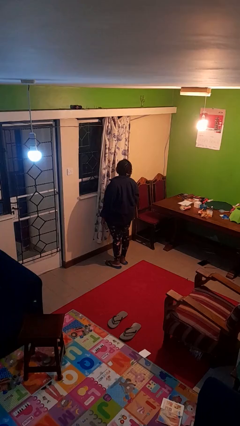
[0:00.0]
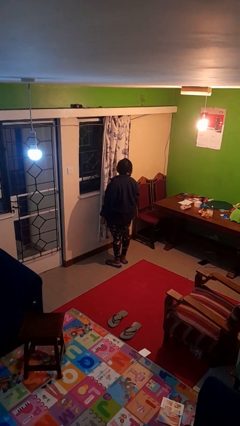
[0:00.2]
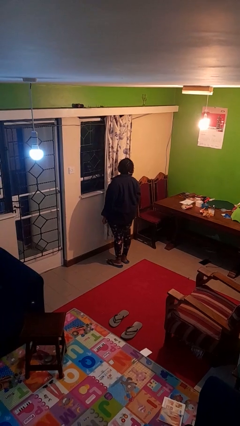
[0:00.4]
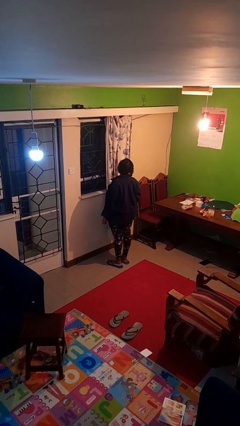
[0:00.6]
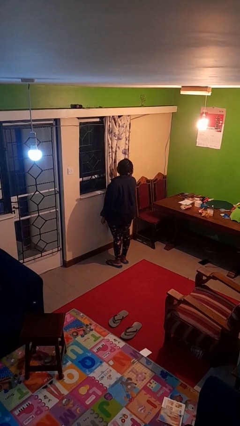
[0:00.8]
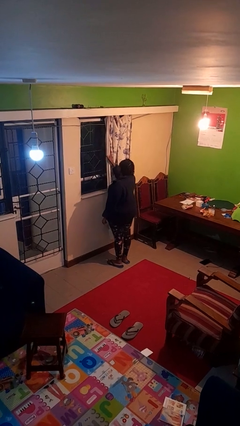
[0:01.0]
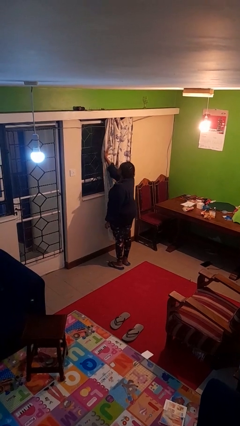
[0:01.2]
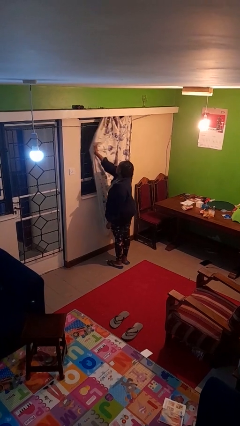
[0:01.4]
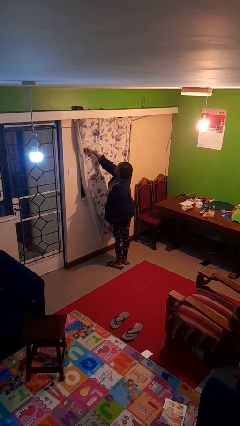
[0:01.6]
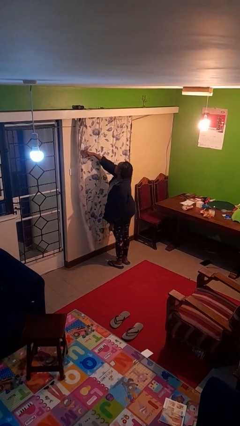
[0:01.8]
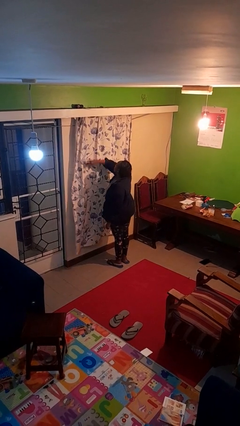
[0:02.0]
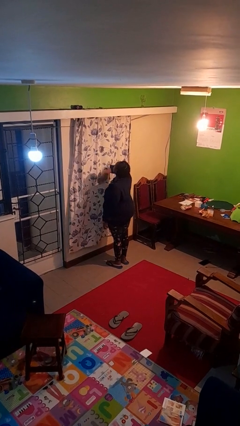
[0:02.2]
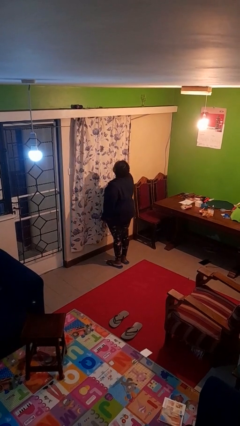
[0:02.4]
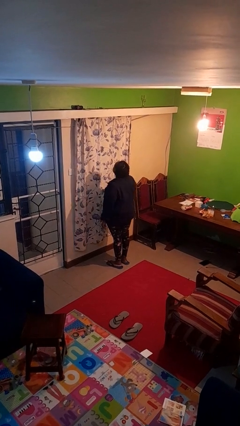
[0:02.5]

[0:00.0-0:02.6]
person closes curtains

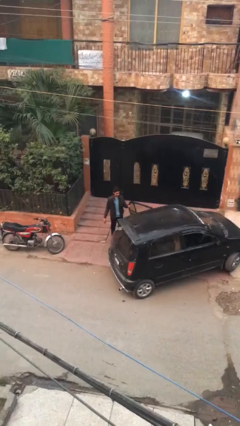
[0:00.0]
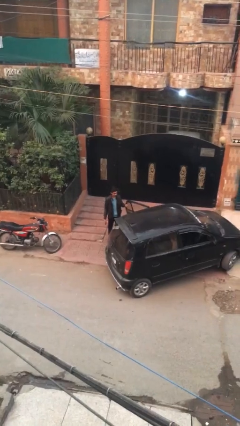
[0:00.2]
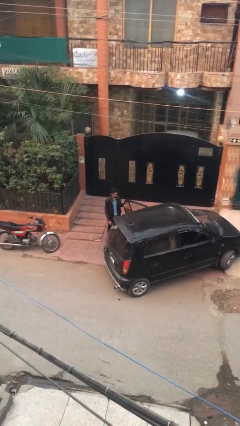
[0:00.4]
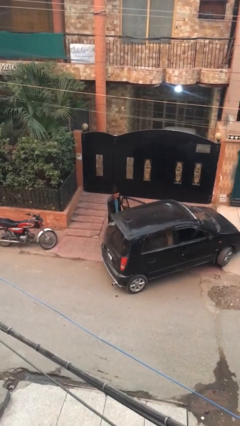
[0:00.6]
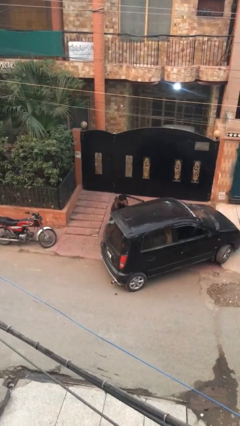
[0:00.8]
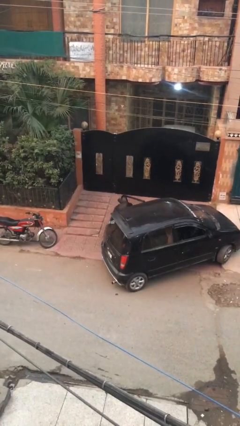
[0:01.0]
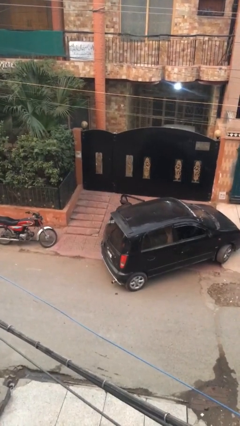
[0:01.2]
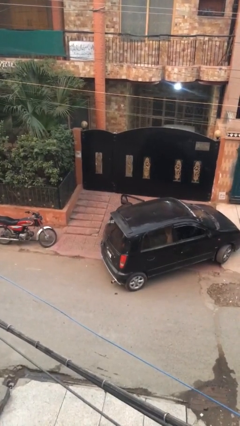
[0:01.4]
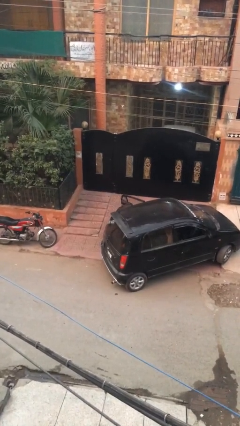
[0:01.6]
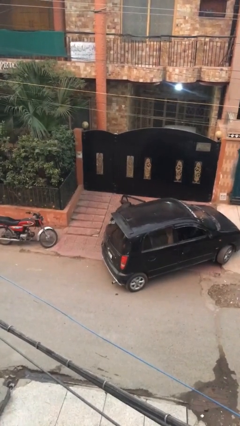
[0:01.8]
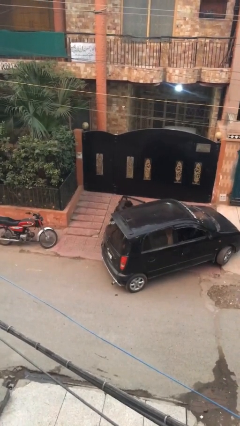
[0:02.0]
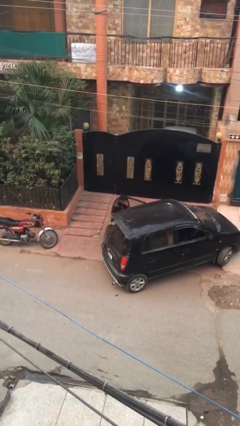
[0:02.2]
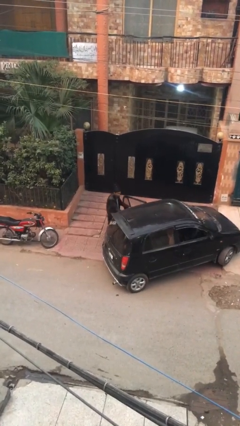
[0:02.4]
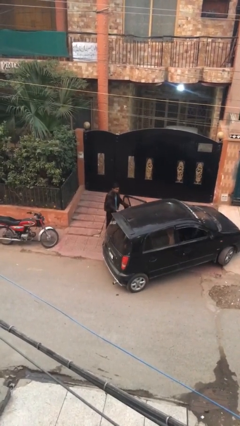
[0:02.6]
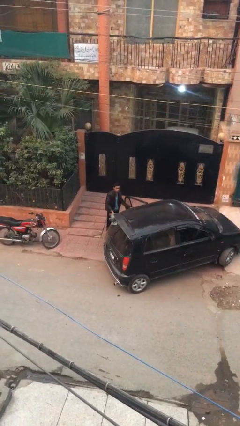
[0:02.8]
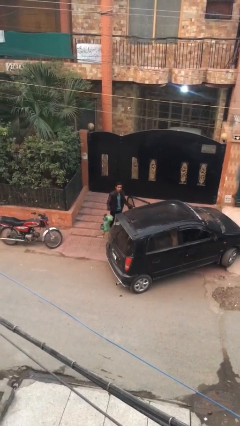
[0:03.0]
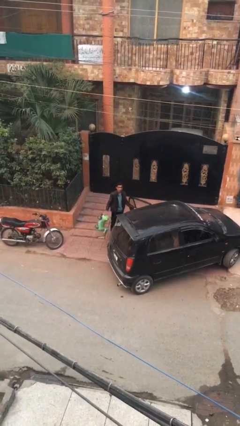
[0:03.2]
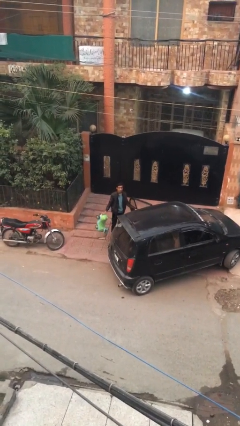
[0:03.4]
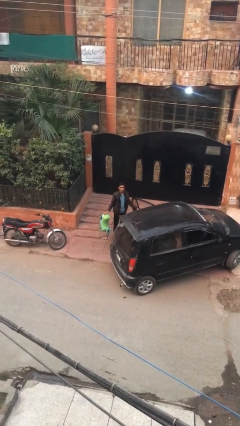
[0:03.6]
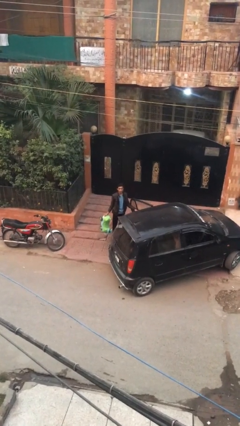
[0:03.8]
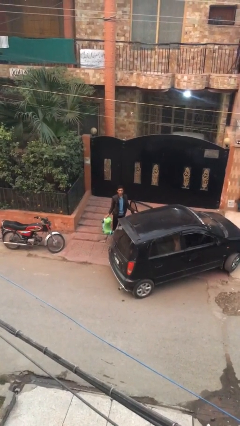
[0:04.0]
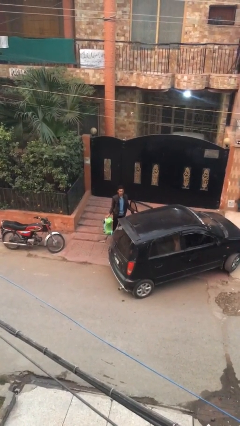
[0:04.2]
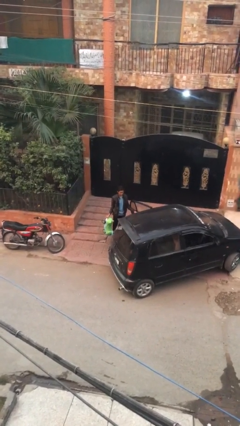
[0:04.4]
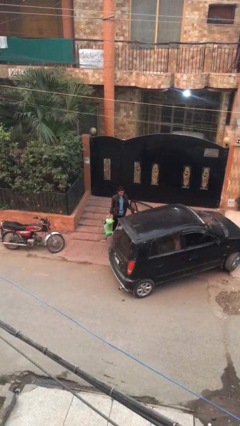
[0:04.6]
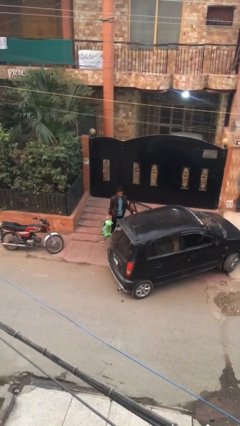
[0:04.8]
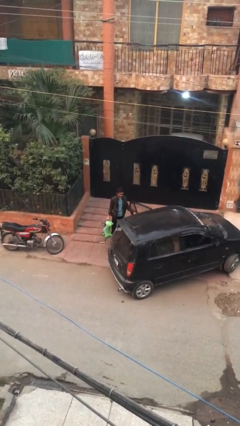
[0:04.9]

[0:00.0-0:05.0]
person unloads car

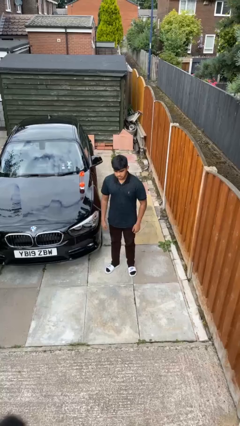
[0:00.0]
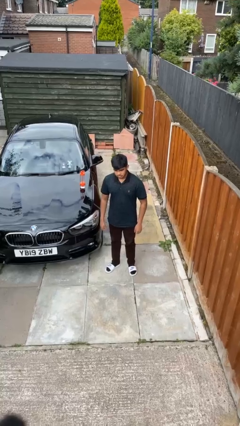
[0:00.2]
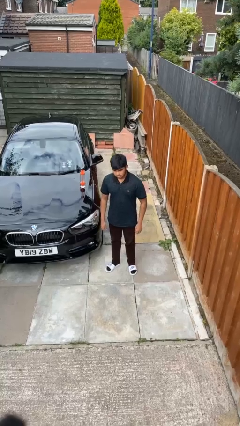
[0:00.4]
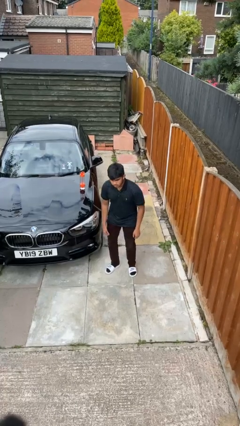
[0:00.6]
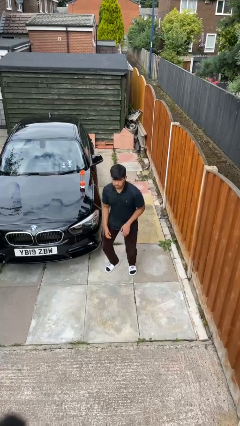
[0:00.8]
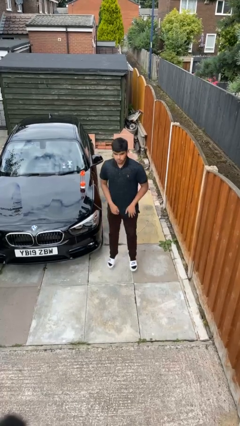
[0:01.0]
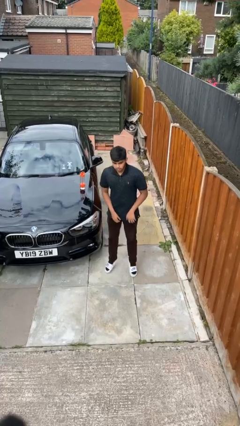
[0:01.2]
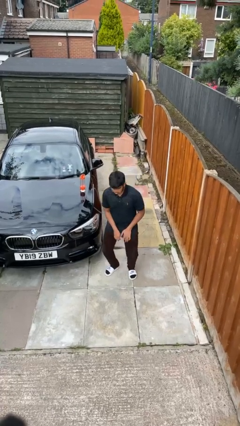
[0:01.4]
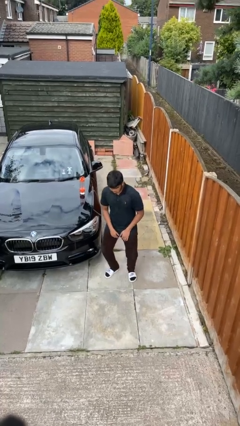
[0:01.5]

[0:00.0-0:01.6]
person jumps

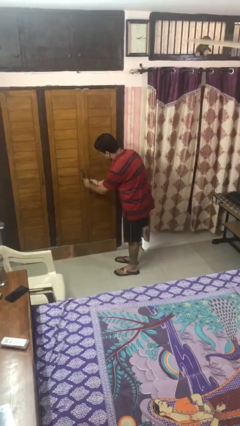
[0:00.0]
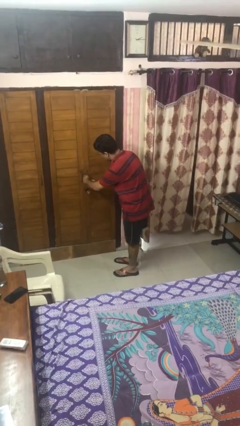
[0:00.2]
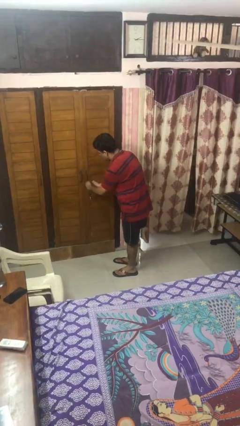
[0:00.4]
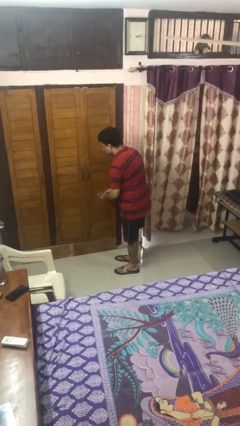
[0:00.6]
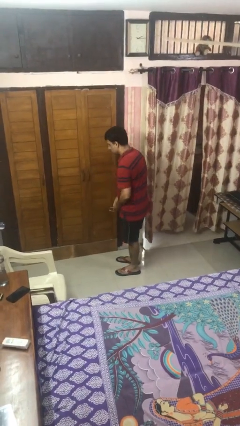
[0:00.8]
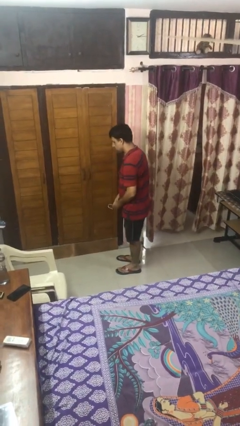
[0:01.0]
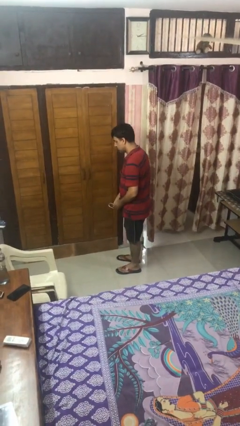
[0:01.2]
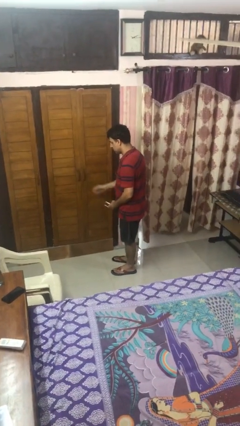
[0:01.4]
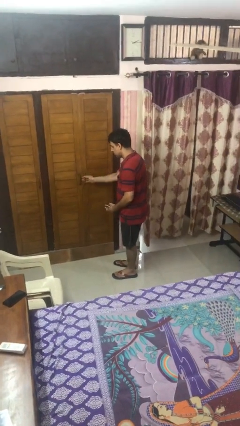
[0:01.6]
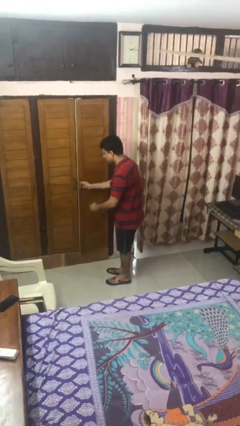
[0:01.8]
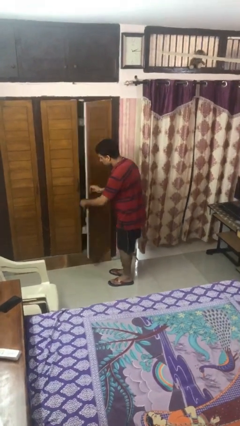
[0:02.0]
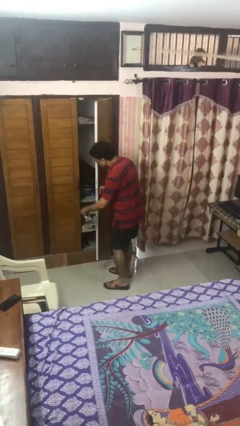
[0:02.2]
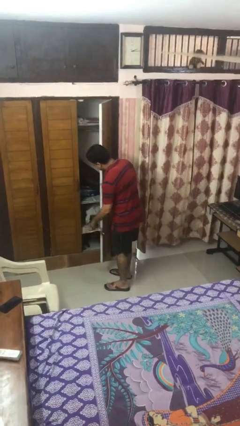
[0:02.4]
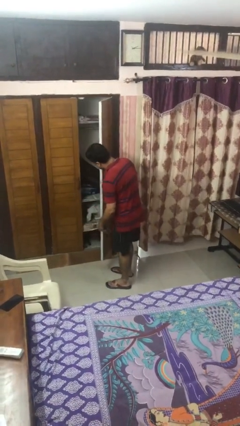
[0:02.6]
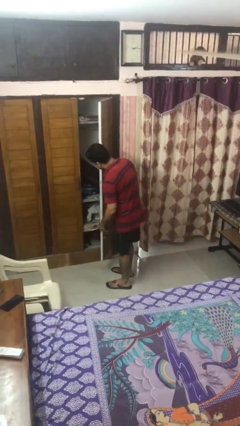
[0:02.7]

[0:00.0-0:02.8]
person opens facility door

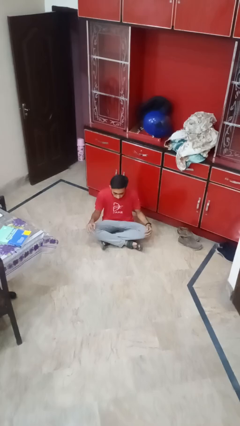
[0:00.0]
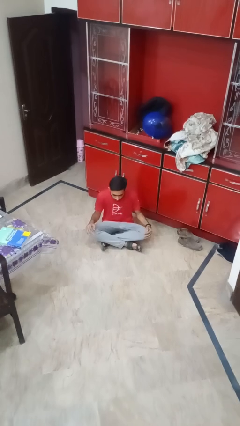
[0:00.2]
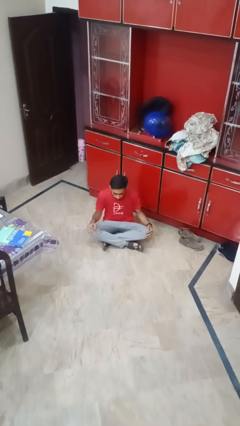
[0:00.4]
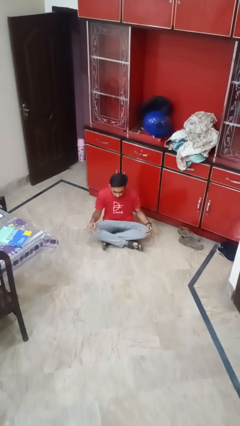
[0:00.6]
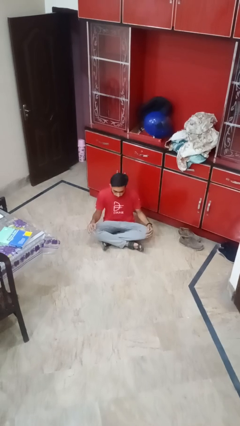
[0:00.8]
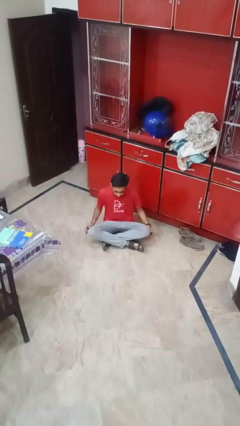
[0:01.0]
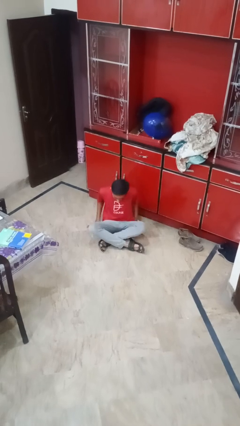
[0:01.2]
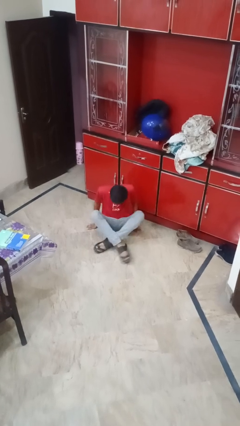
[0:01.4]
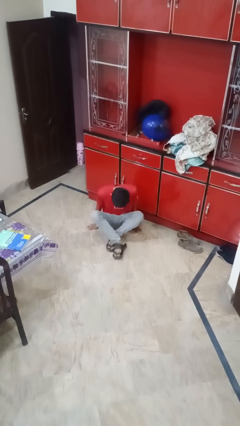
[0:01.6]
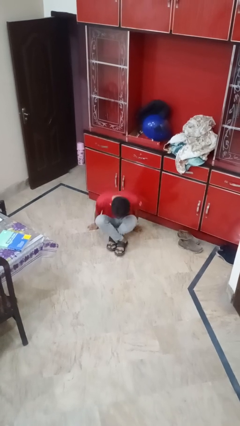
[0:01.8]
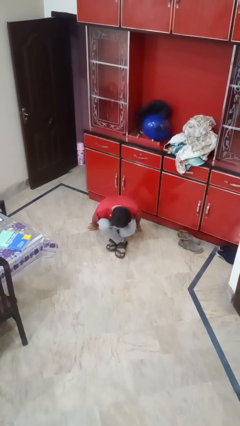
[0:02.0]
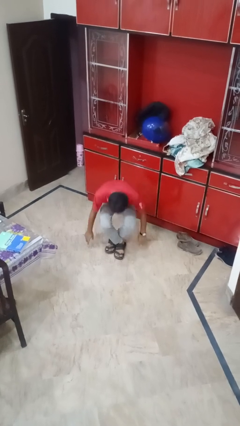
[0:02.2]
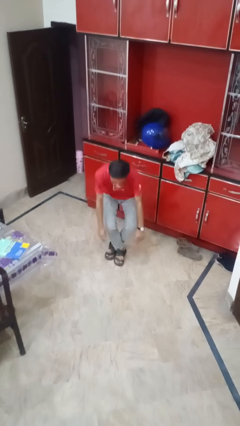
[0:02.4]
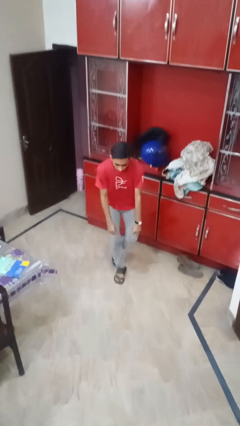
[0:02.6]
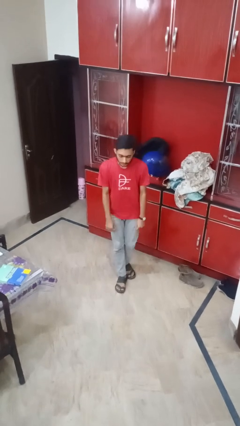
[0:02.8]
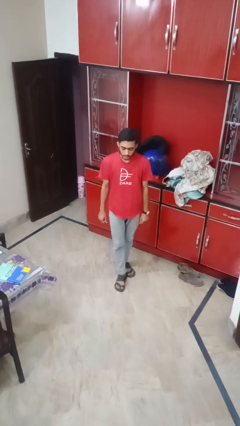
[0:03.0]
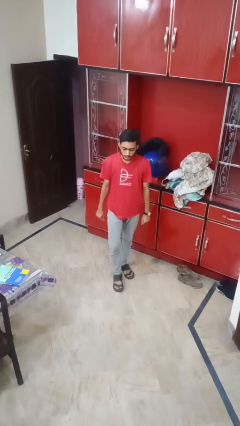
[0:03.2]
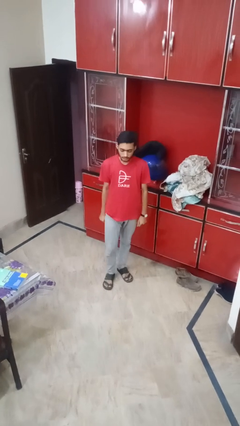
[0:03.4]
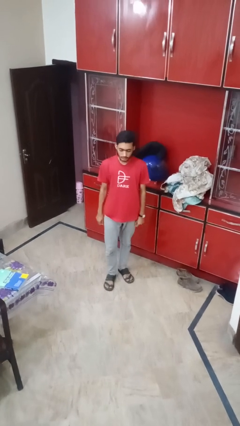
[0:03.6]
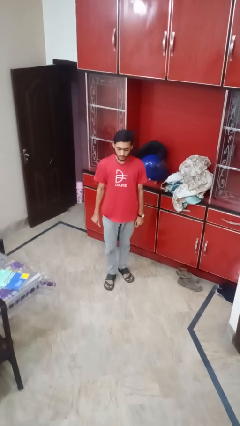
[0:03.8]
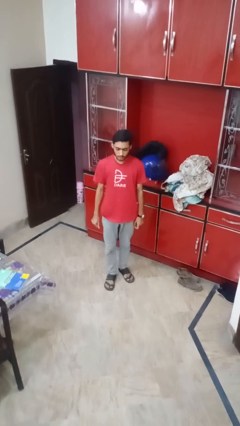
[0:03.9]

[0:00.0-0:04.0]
person stands up from floor

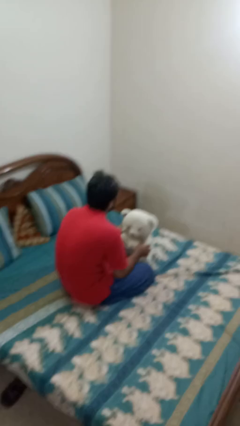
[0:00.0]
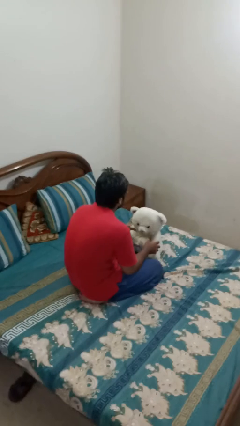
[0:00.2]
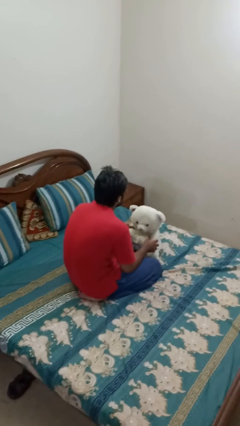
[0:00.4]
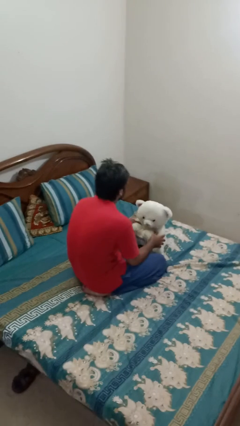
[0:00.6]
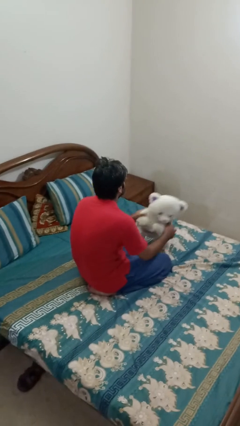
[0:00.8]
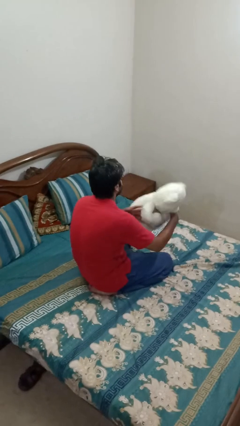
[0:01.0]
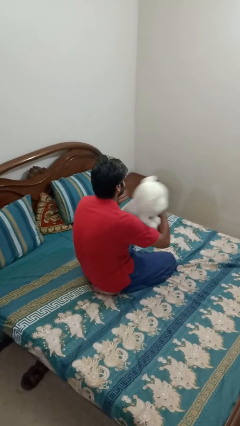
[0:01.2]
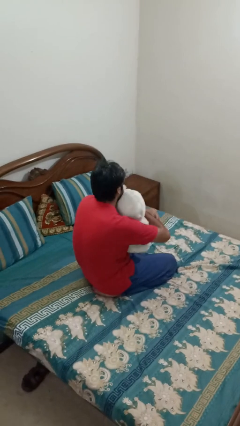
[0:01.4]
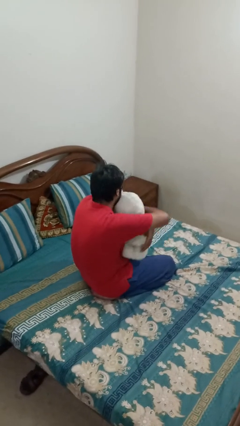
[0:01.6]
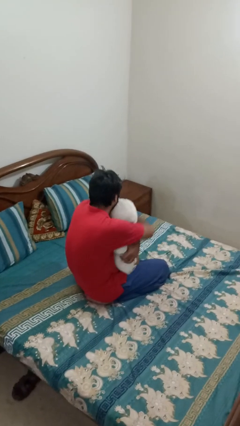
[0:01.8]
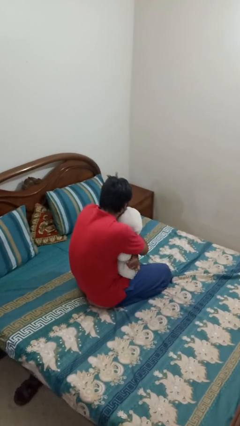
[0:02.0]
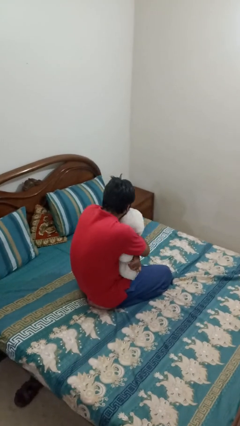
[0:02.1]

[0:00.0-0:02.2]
person hugs stuffed animal
